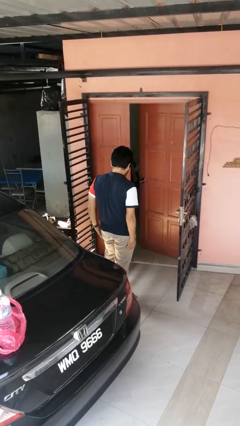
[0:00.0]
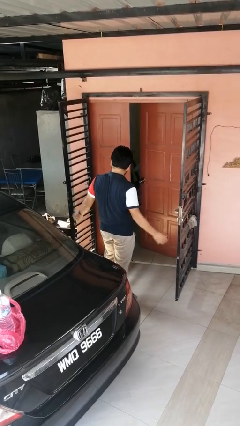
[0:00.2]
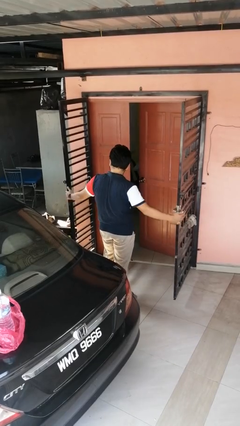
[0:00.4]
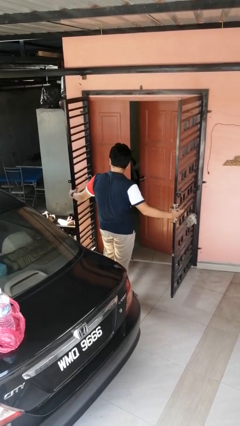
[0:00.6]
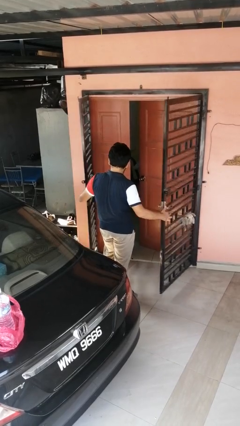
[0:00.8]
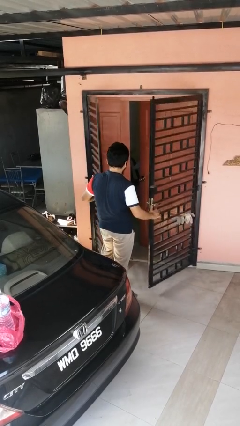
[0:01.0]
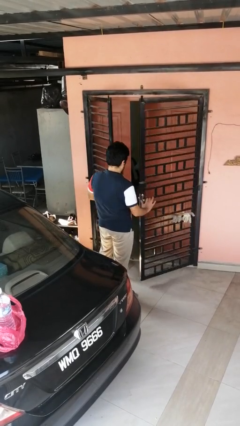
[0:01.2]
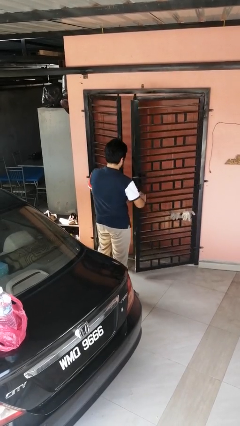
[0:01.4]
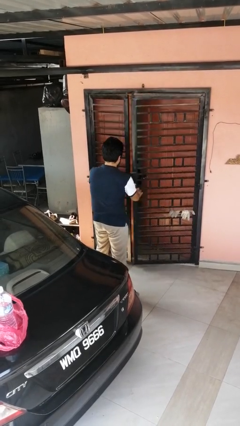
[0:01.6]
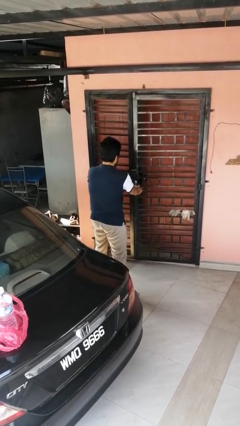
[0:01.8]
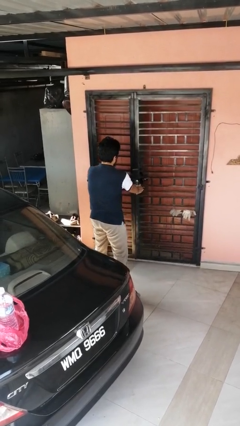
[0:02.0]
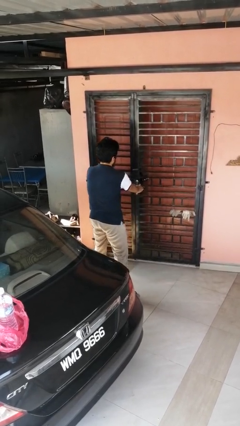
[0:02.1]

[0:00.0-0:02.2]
person closes gate

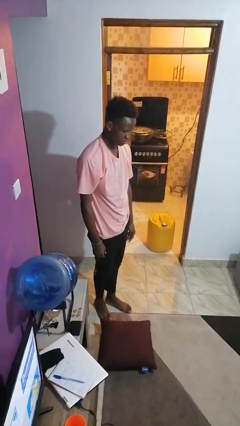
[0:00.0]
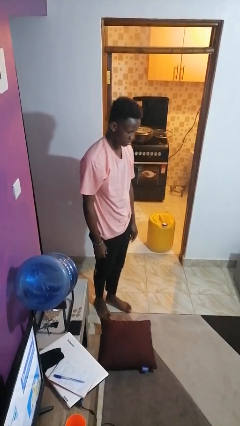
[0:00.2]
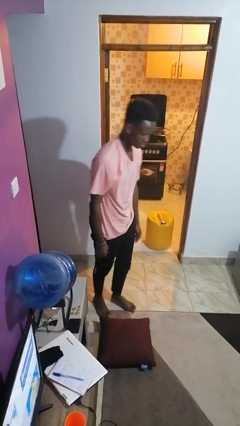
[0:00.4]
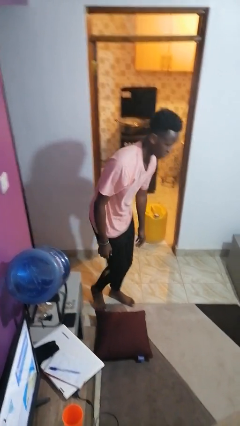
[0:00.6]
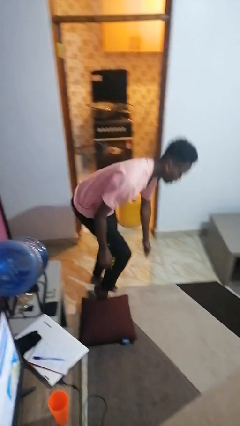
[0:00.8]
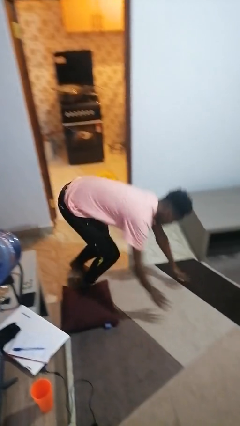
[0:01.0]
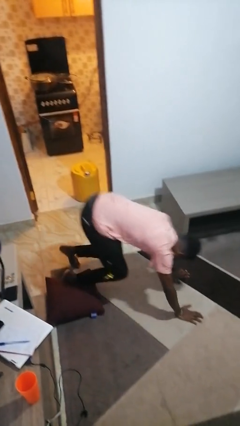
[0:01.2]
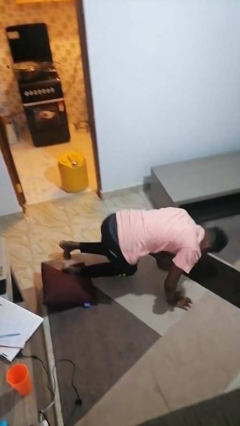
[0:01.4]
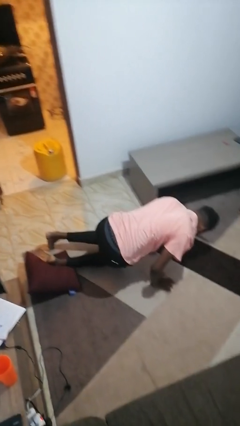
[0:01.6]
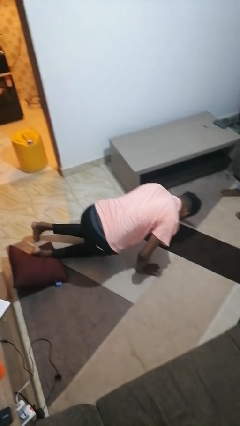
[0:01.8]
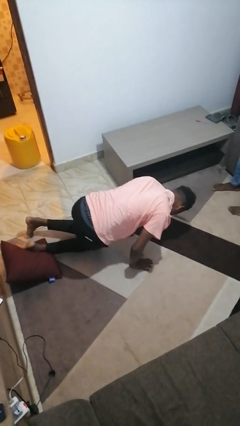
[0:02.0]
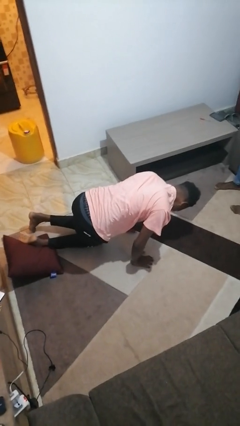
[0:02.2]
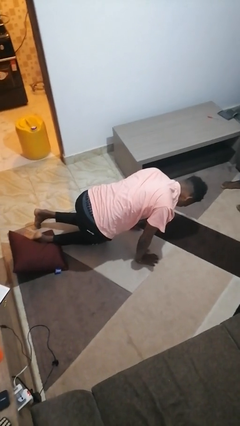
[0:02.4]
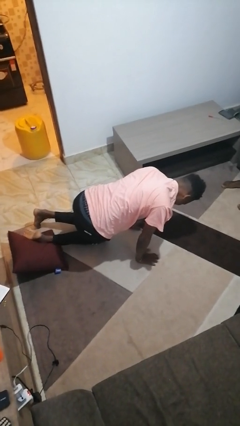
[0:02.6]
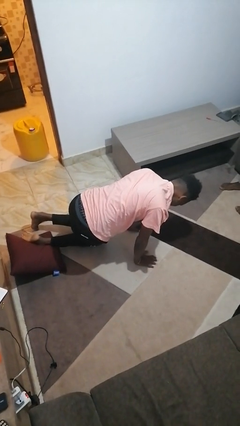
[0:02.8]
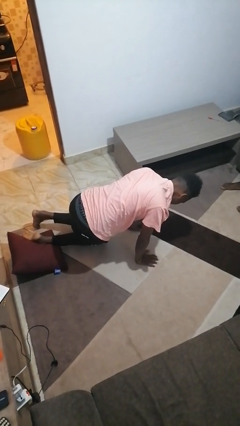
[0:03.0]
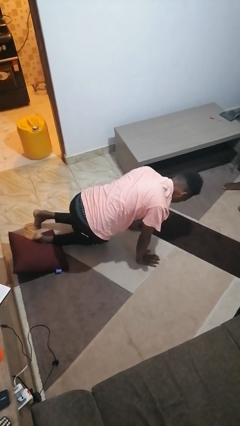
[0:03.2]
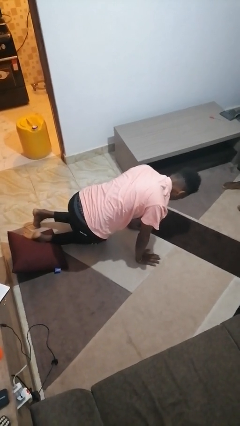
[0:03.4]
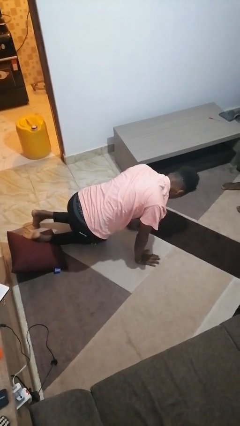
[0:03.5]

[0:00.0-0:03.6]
person trips on object on floor

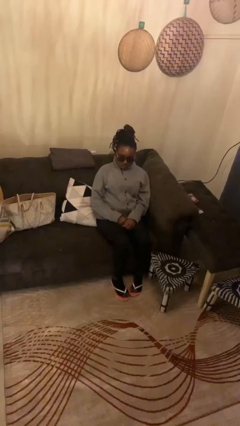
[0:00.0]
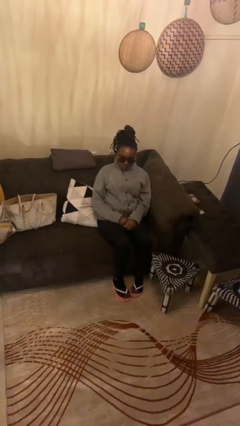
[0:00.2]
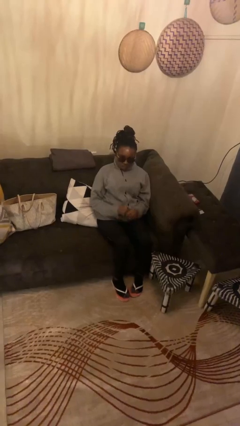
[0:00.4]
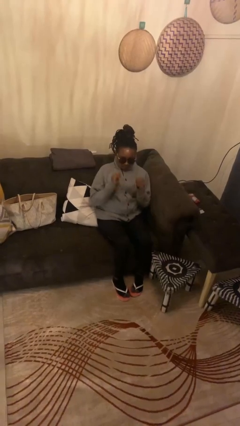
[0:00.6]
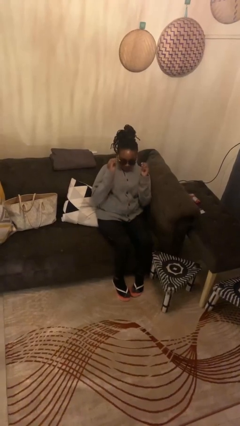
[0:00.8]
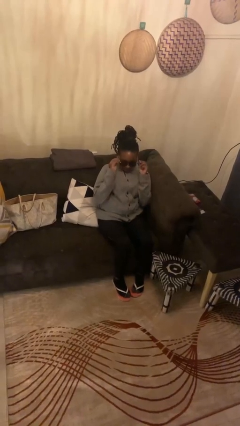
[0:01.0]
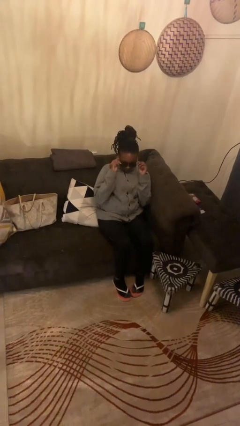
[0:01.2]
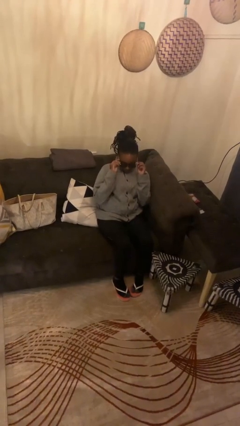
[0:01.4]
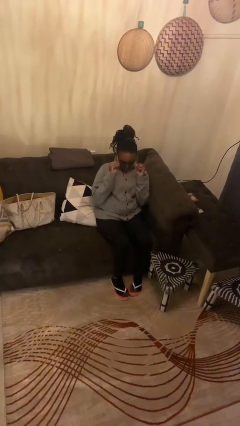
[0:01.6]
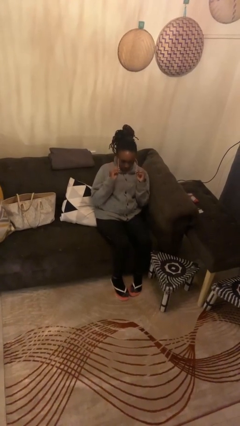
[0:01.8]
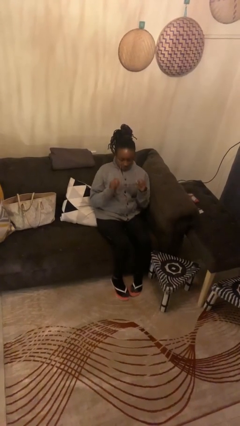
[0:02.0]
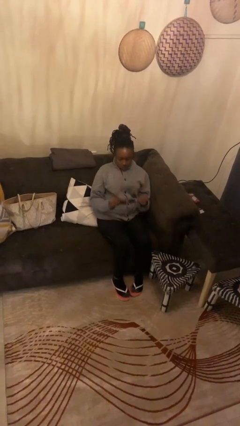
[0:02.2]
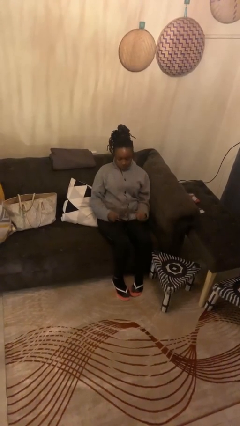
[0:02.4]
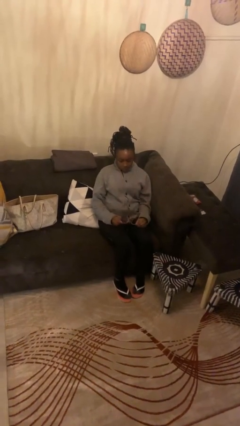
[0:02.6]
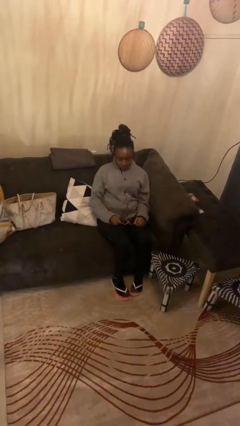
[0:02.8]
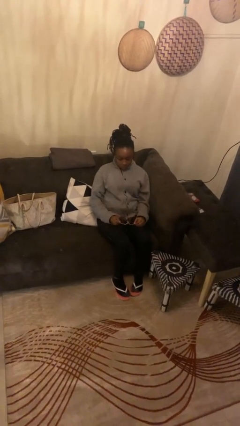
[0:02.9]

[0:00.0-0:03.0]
person takes off sunglasses

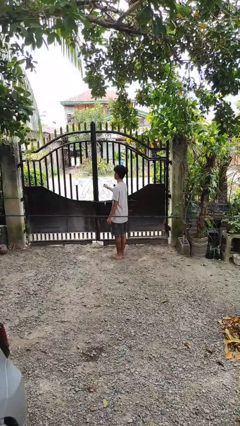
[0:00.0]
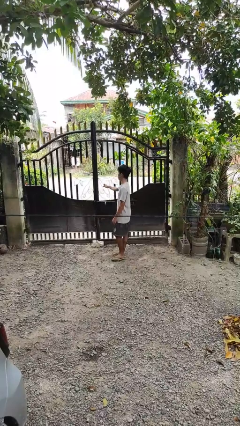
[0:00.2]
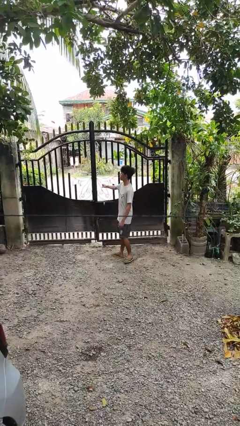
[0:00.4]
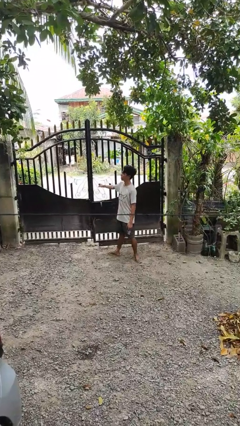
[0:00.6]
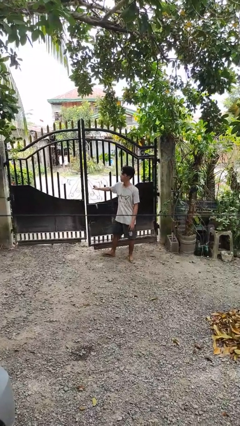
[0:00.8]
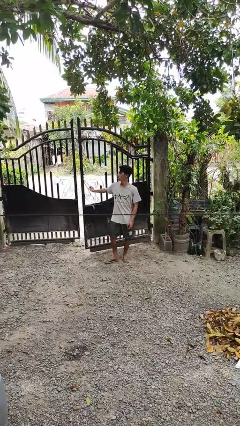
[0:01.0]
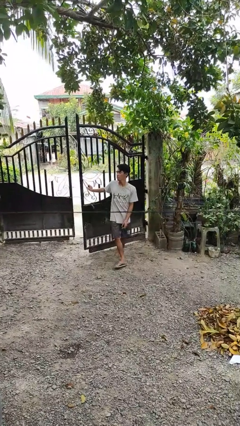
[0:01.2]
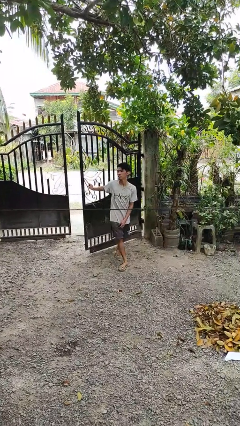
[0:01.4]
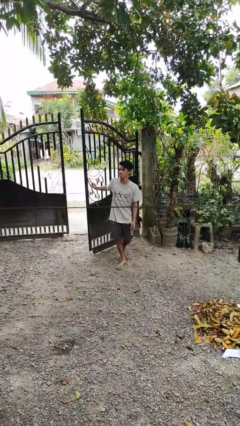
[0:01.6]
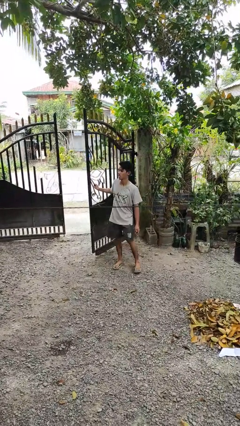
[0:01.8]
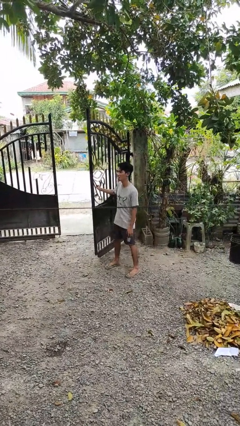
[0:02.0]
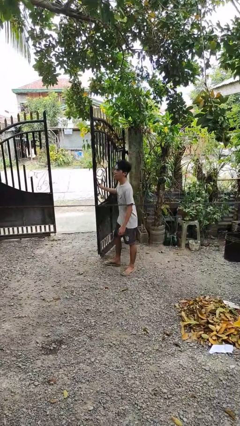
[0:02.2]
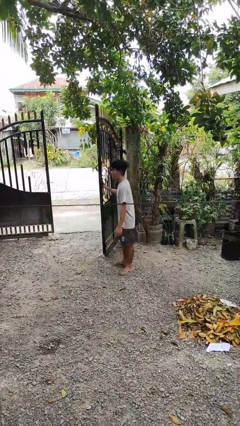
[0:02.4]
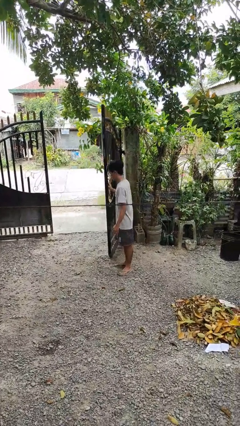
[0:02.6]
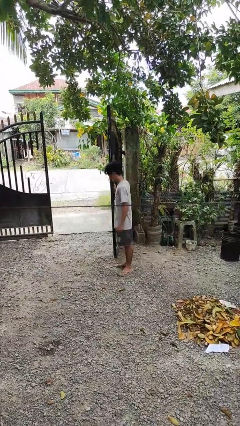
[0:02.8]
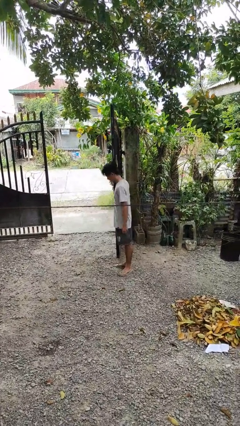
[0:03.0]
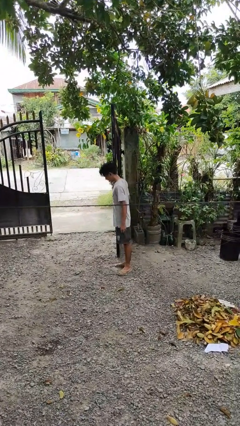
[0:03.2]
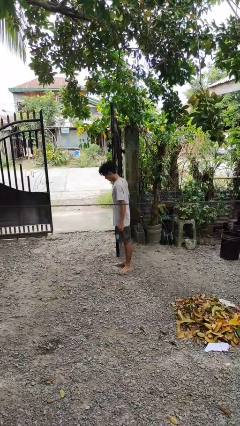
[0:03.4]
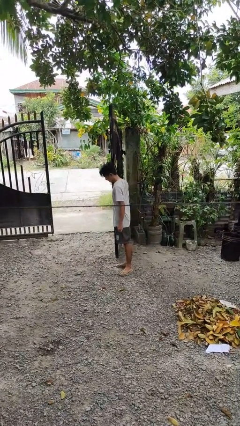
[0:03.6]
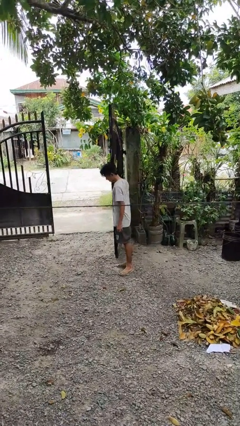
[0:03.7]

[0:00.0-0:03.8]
person opens gate

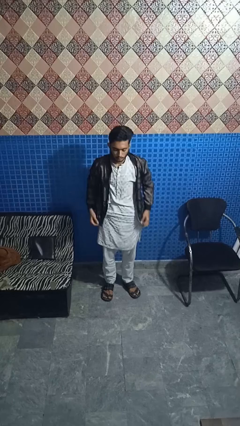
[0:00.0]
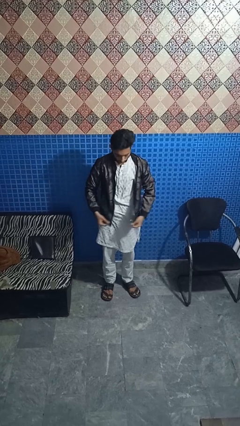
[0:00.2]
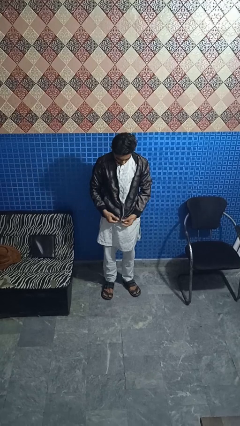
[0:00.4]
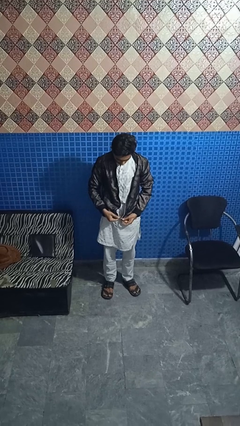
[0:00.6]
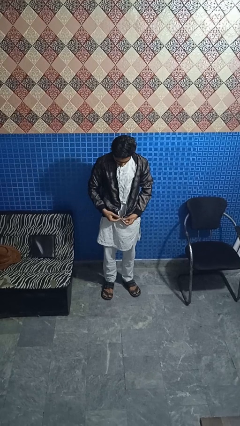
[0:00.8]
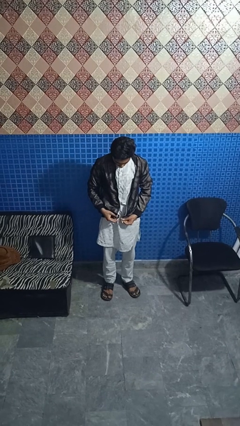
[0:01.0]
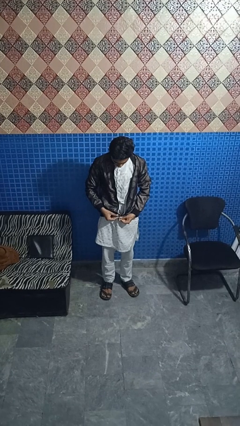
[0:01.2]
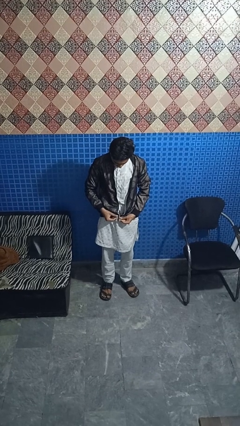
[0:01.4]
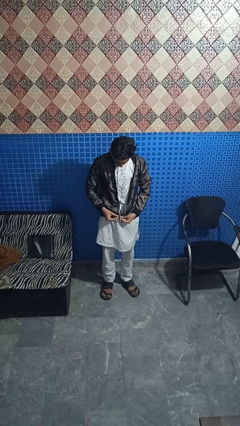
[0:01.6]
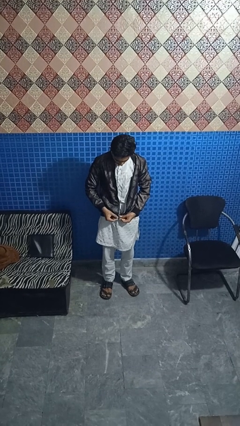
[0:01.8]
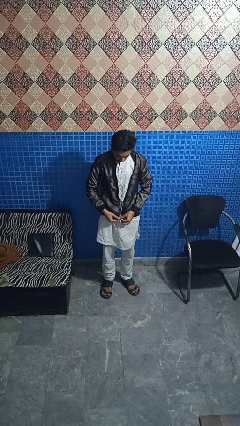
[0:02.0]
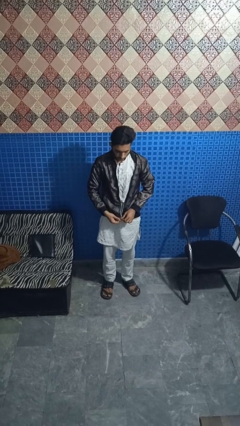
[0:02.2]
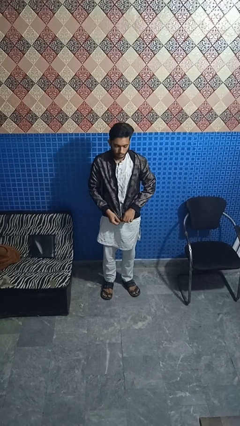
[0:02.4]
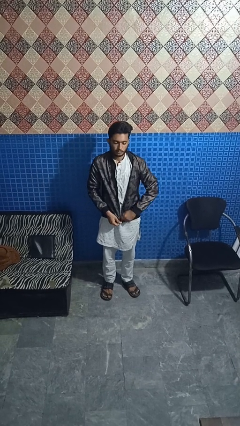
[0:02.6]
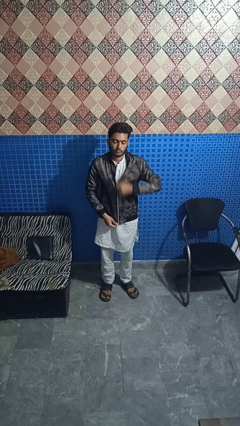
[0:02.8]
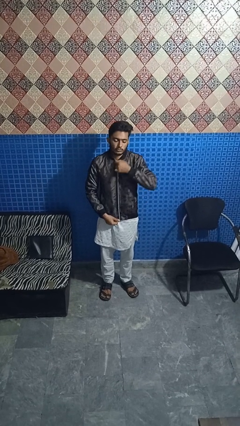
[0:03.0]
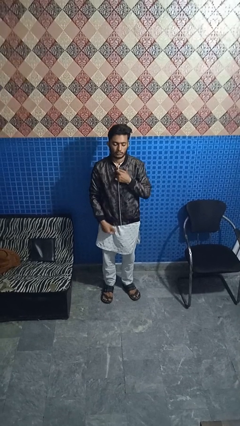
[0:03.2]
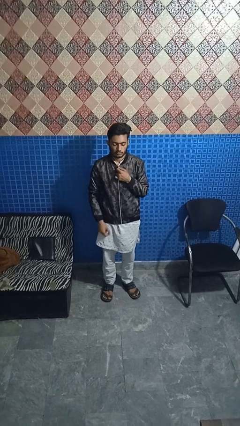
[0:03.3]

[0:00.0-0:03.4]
person zips up jacket

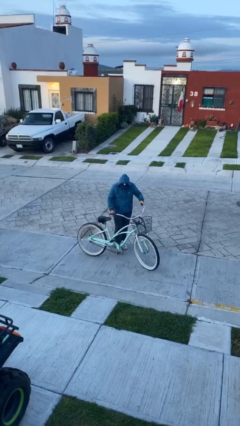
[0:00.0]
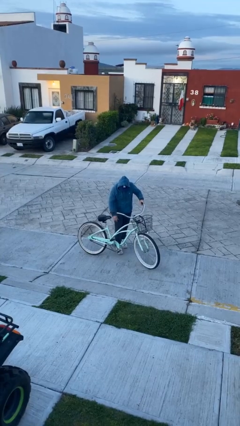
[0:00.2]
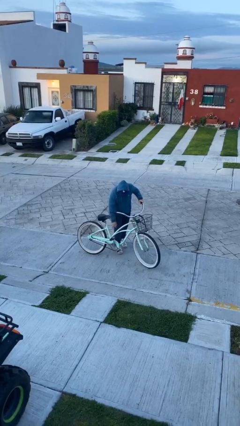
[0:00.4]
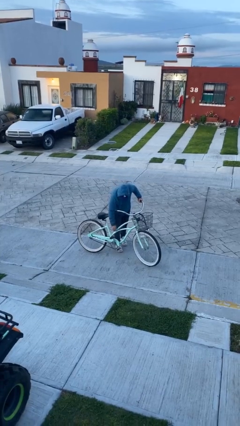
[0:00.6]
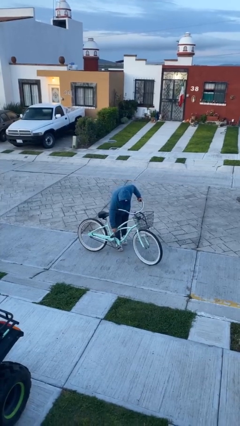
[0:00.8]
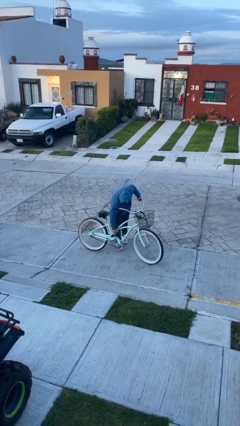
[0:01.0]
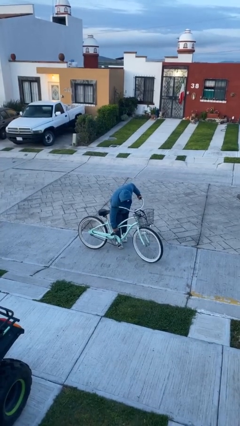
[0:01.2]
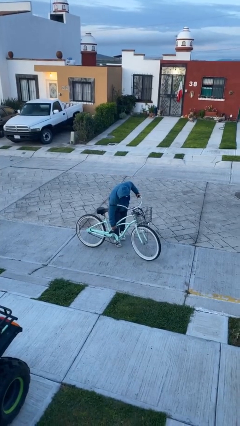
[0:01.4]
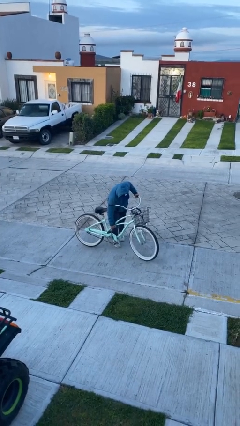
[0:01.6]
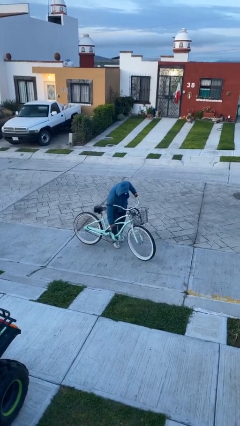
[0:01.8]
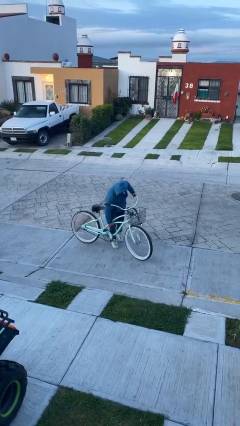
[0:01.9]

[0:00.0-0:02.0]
person picks up object from floor
